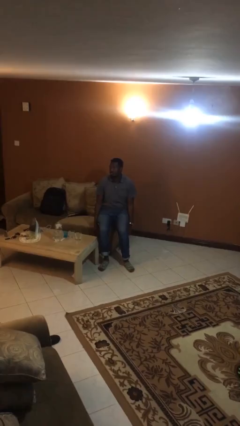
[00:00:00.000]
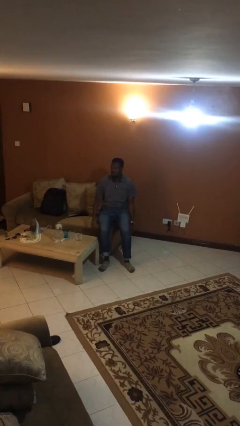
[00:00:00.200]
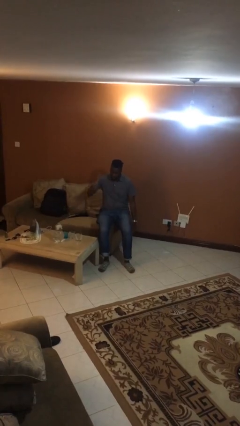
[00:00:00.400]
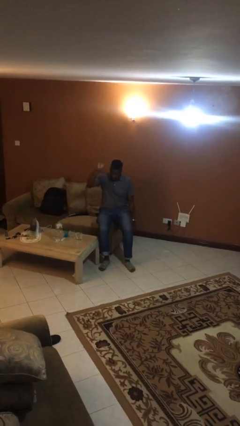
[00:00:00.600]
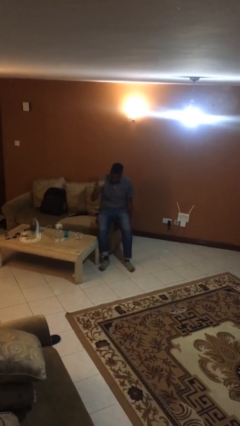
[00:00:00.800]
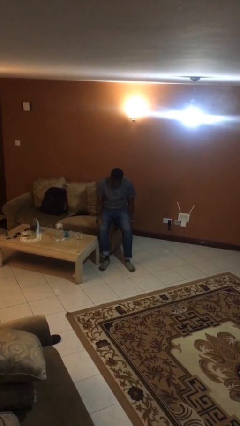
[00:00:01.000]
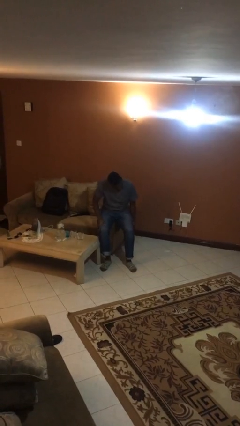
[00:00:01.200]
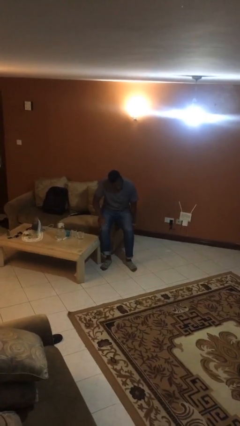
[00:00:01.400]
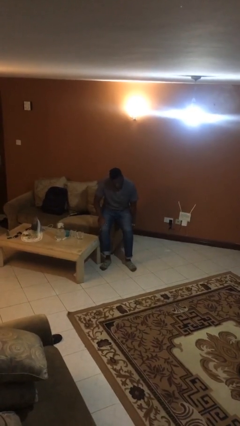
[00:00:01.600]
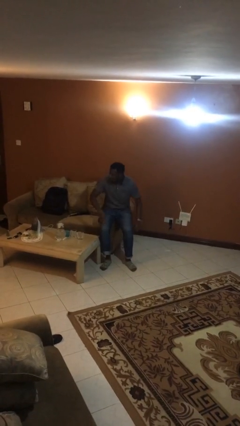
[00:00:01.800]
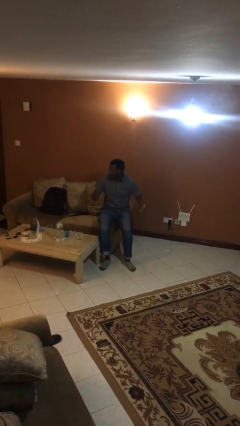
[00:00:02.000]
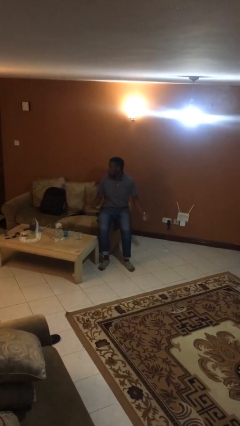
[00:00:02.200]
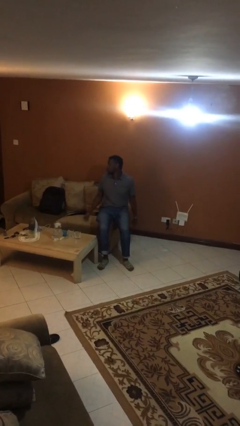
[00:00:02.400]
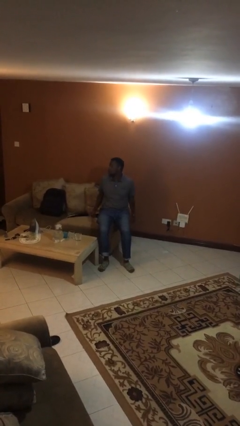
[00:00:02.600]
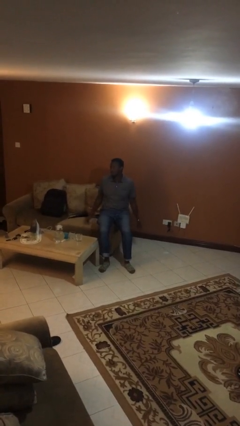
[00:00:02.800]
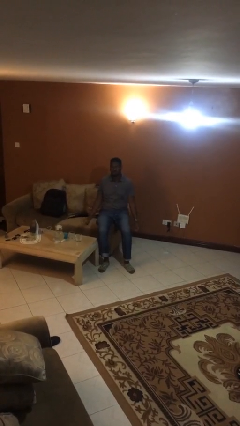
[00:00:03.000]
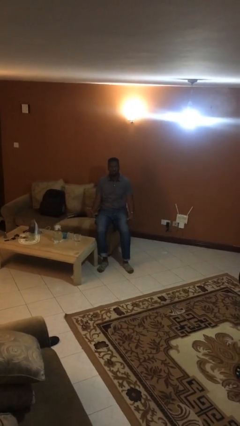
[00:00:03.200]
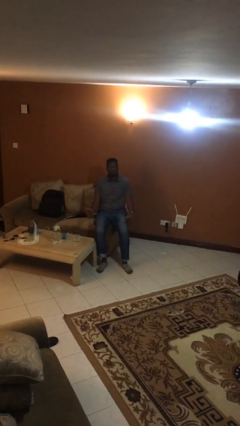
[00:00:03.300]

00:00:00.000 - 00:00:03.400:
person slaps hands on thighs

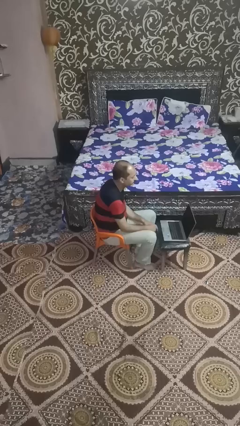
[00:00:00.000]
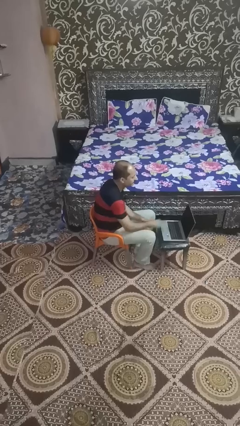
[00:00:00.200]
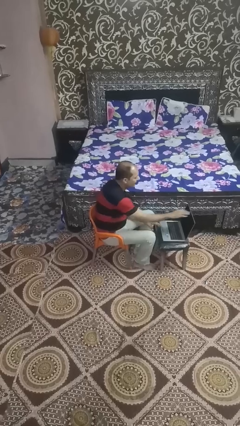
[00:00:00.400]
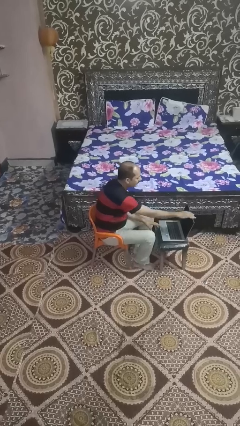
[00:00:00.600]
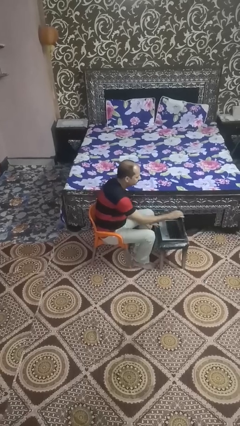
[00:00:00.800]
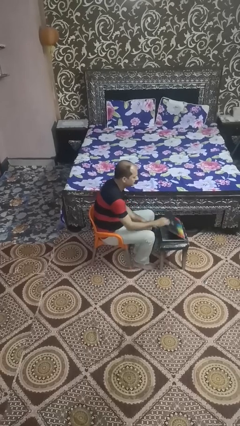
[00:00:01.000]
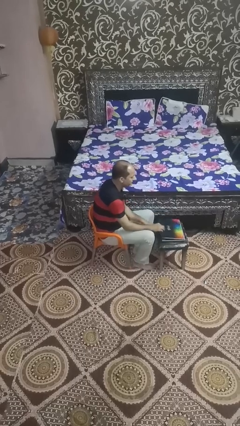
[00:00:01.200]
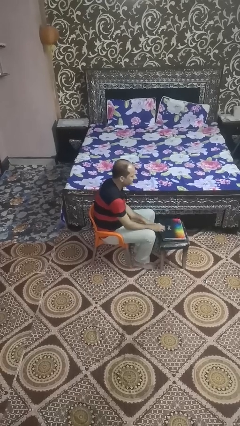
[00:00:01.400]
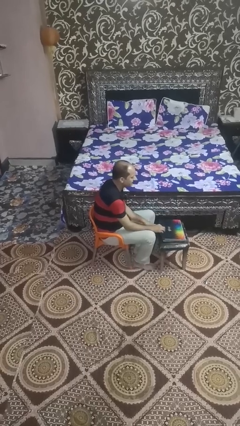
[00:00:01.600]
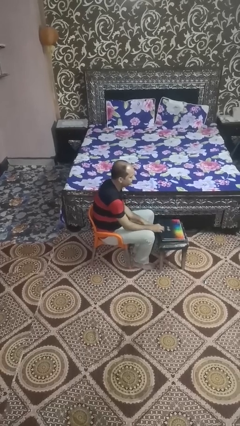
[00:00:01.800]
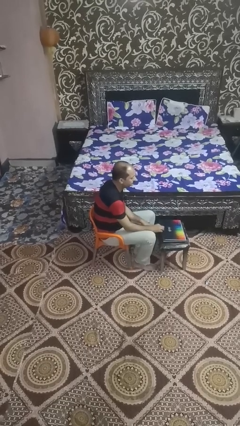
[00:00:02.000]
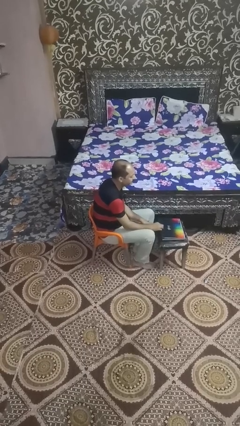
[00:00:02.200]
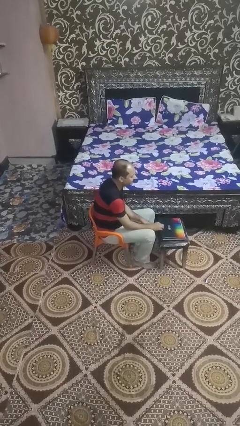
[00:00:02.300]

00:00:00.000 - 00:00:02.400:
person closes laptop

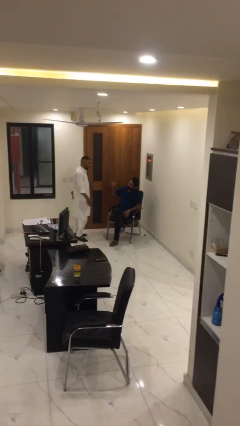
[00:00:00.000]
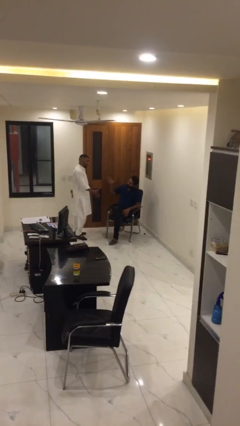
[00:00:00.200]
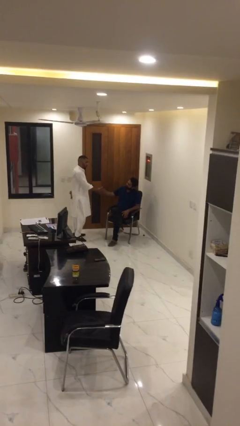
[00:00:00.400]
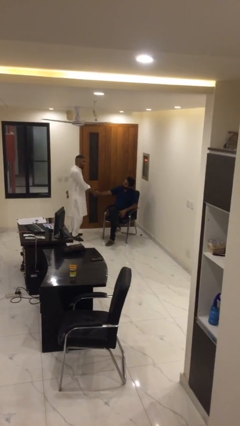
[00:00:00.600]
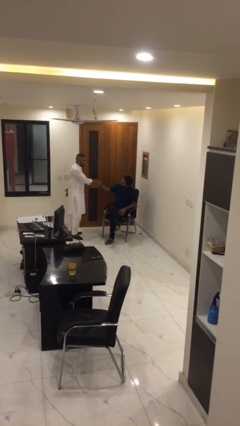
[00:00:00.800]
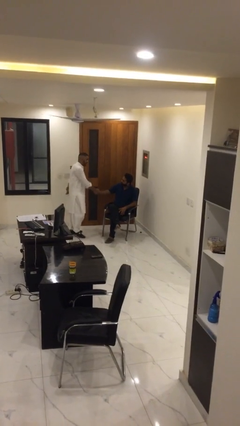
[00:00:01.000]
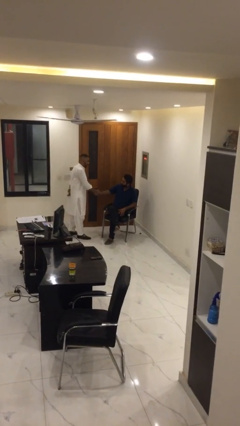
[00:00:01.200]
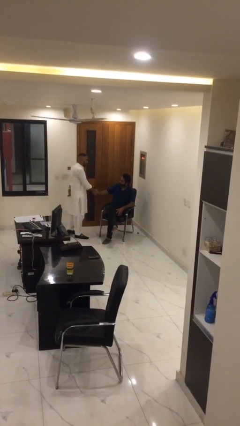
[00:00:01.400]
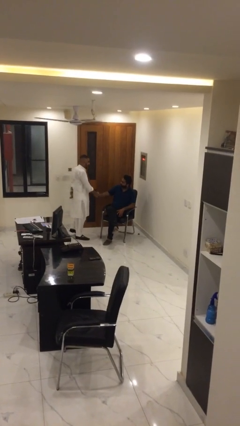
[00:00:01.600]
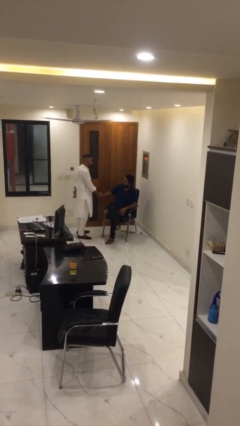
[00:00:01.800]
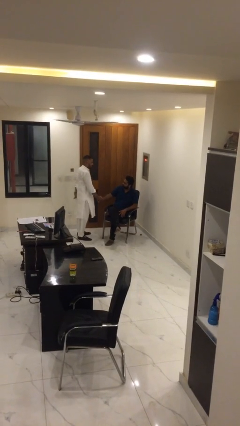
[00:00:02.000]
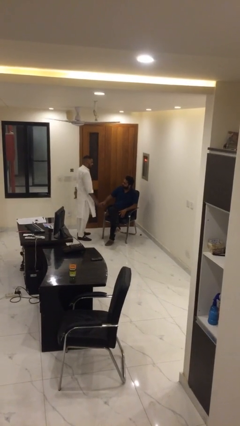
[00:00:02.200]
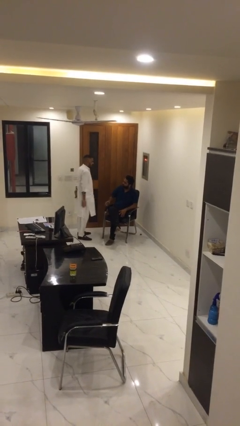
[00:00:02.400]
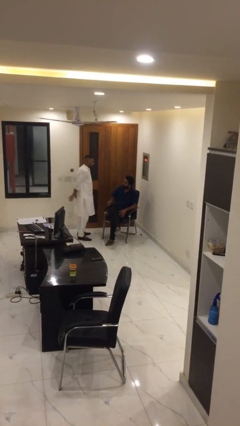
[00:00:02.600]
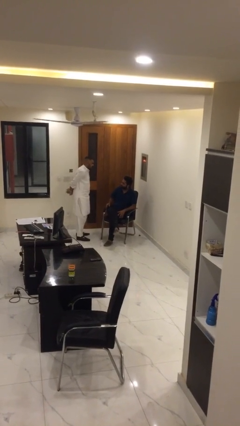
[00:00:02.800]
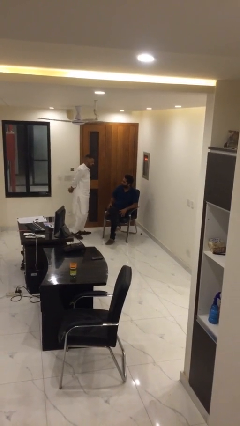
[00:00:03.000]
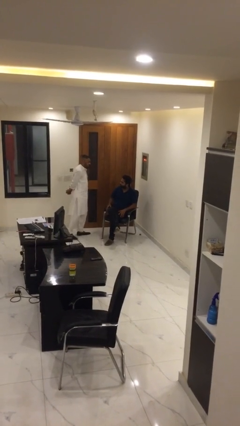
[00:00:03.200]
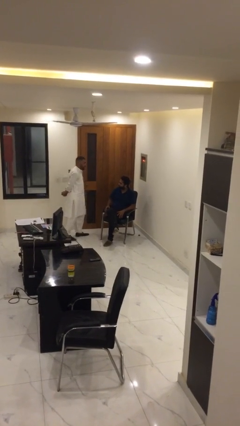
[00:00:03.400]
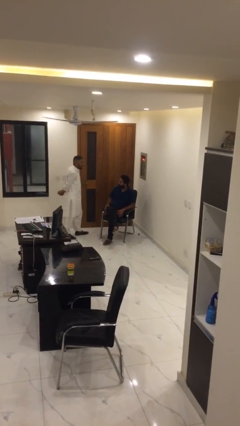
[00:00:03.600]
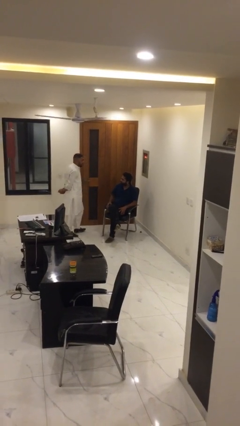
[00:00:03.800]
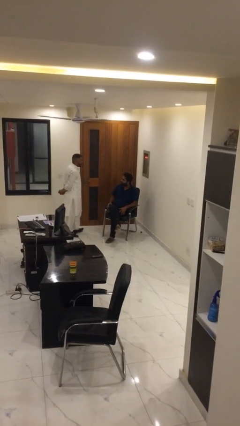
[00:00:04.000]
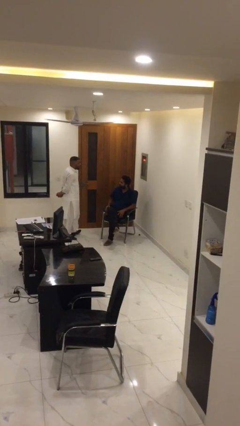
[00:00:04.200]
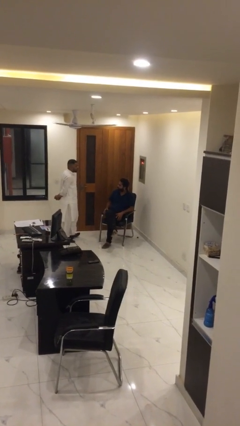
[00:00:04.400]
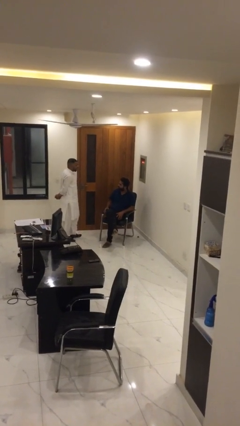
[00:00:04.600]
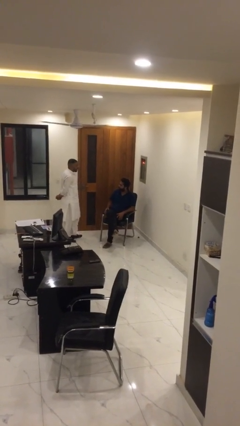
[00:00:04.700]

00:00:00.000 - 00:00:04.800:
person shakes hand

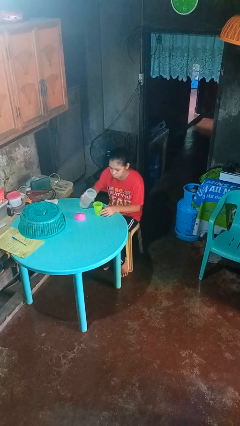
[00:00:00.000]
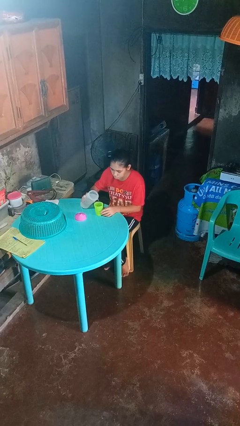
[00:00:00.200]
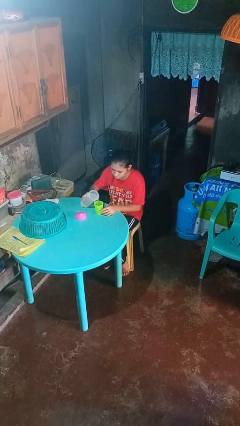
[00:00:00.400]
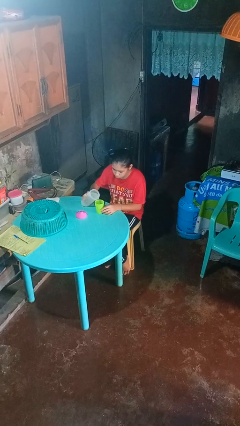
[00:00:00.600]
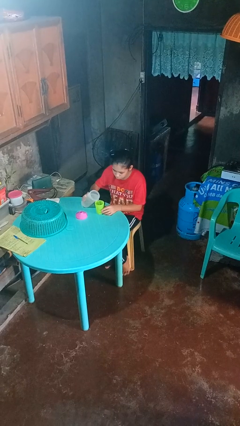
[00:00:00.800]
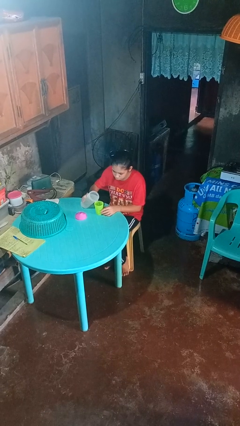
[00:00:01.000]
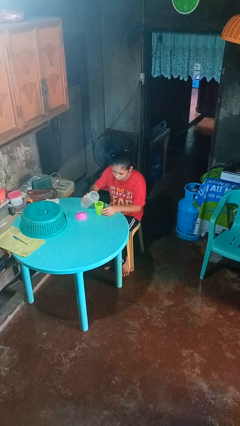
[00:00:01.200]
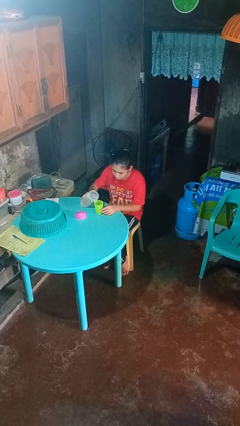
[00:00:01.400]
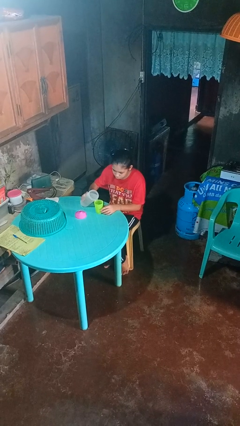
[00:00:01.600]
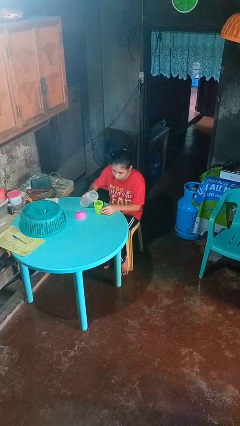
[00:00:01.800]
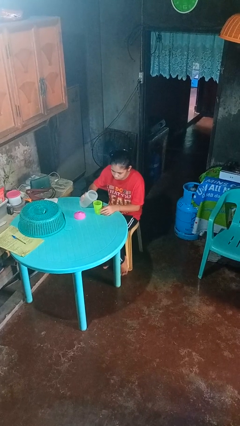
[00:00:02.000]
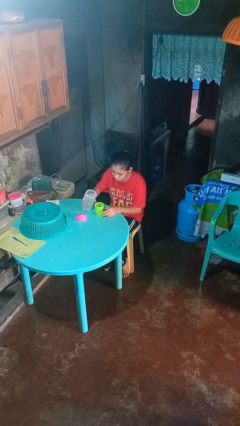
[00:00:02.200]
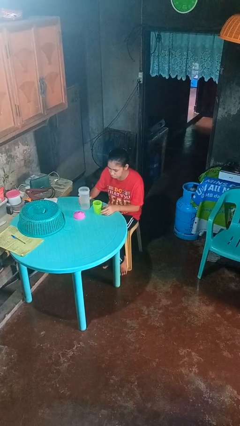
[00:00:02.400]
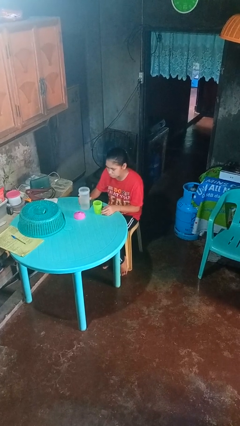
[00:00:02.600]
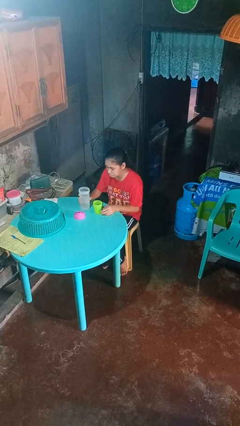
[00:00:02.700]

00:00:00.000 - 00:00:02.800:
person pours liquid into cup

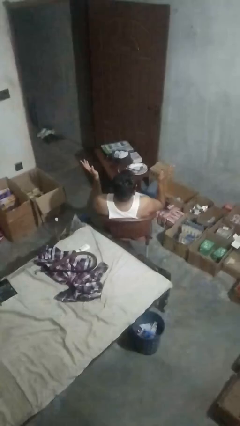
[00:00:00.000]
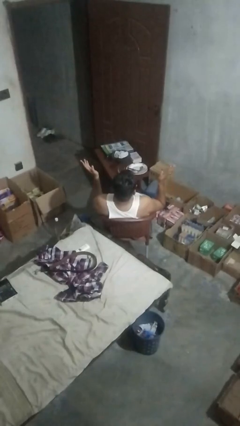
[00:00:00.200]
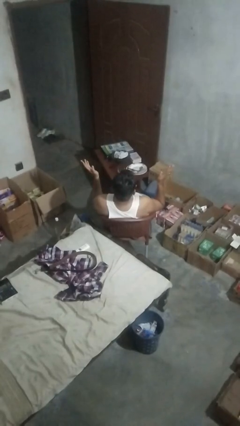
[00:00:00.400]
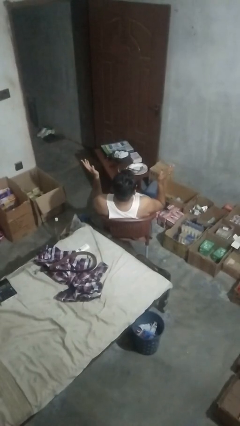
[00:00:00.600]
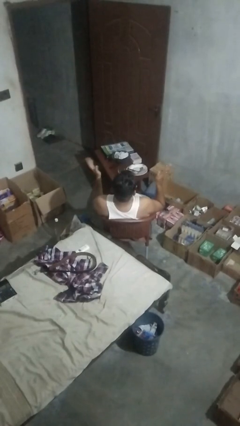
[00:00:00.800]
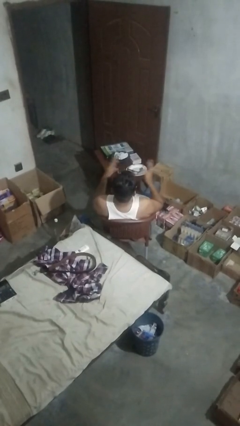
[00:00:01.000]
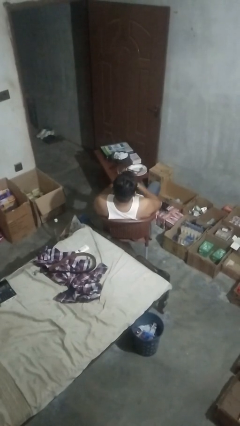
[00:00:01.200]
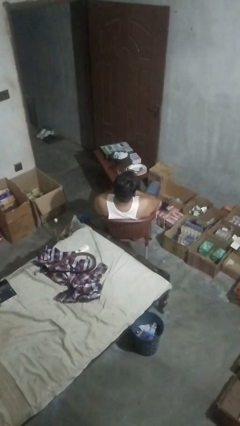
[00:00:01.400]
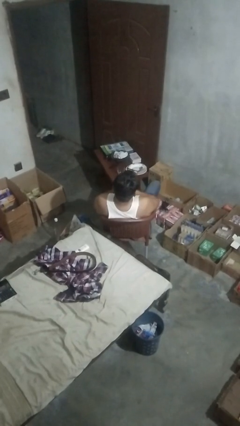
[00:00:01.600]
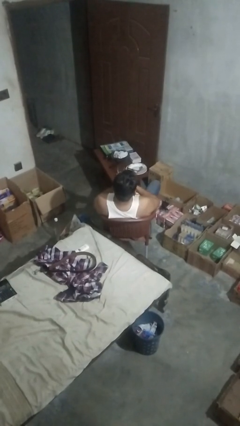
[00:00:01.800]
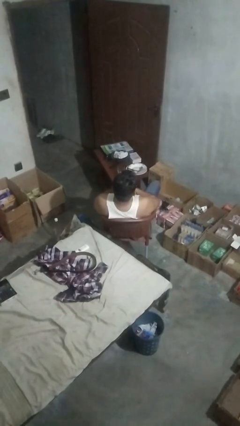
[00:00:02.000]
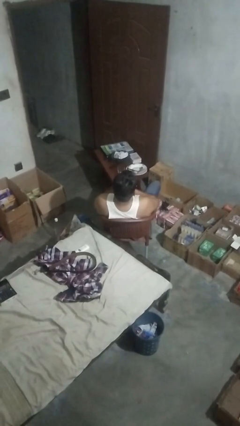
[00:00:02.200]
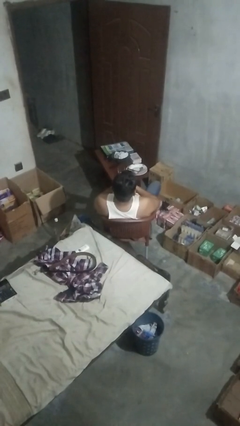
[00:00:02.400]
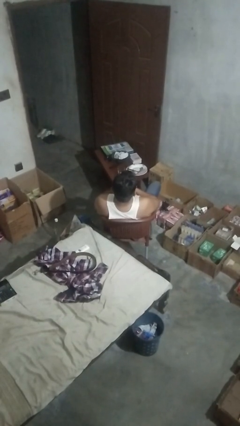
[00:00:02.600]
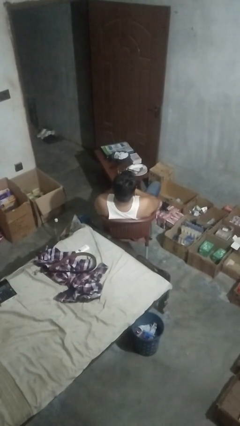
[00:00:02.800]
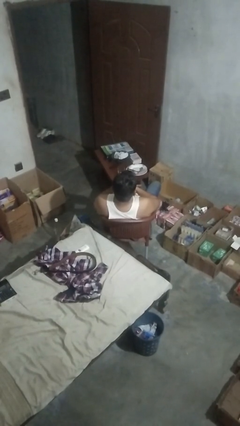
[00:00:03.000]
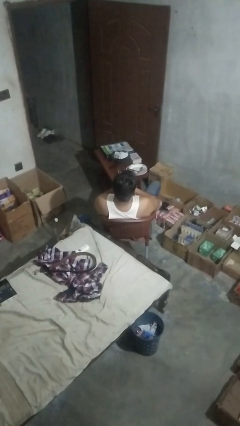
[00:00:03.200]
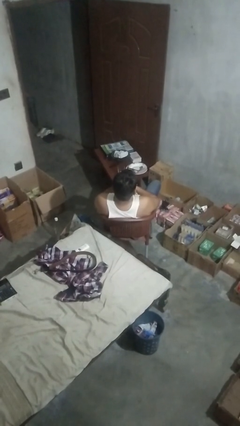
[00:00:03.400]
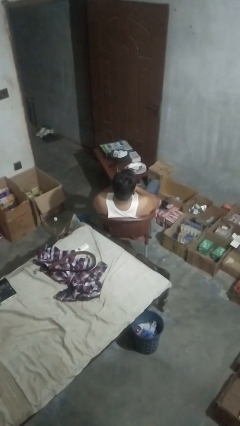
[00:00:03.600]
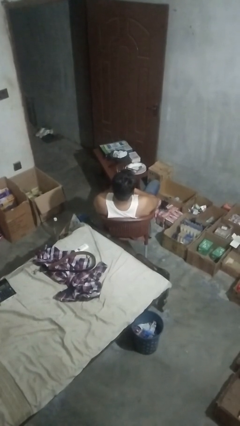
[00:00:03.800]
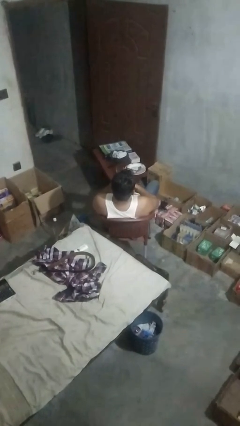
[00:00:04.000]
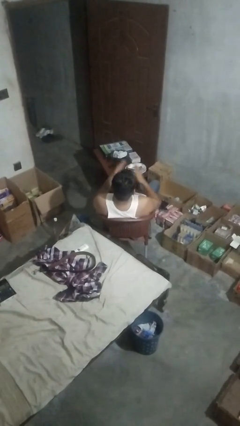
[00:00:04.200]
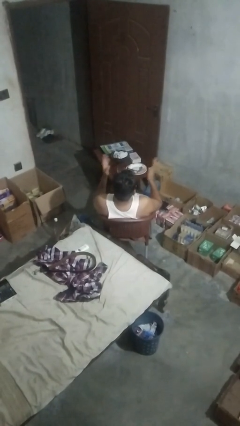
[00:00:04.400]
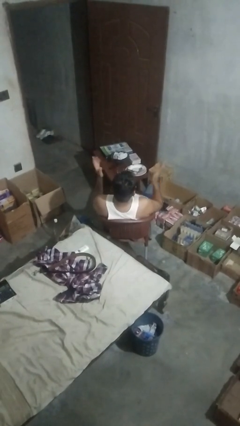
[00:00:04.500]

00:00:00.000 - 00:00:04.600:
person drums on chest
